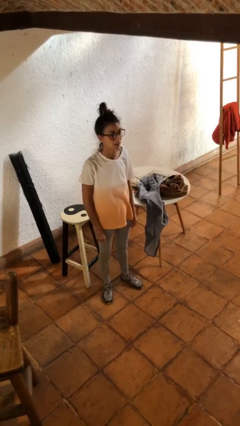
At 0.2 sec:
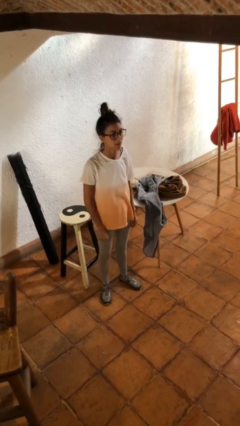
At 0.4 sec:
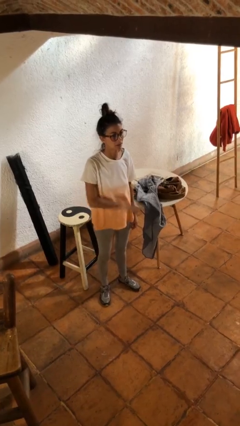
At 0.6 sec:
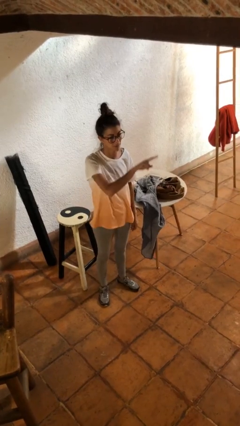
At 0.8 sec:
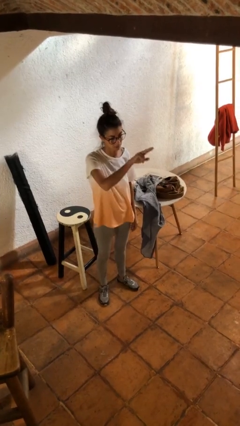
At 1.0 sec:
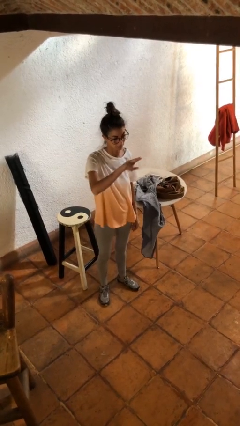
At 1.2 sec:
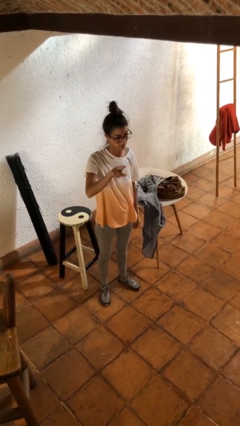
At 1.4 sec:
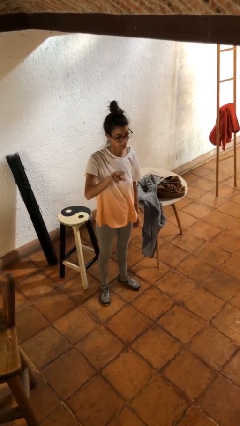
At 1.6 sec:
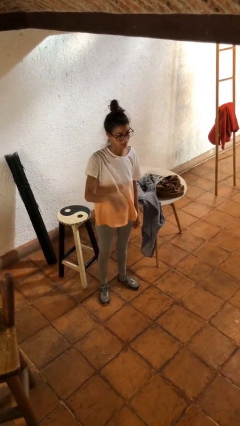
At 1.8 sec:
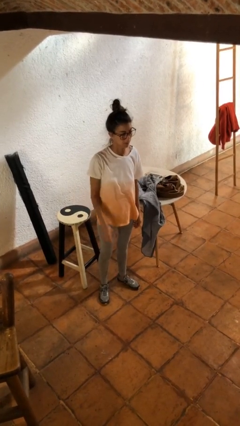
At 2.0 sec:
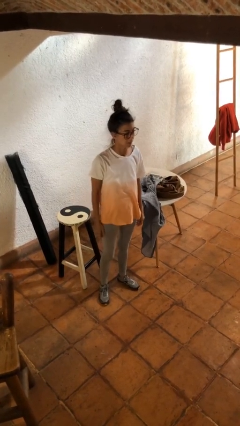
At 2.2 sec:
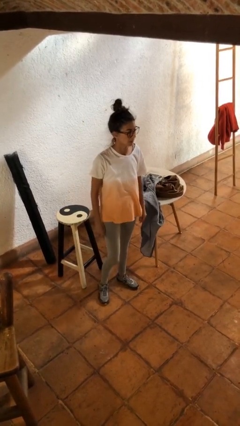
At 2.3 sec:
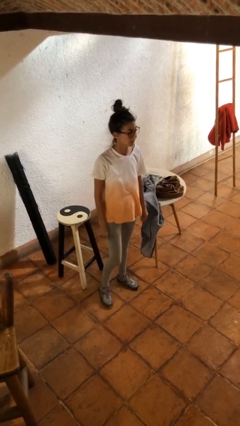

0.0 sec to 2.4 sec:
person gestures swipe right

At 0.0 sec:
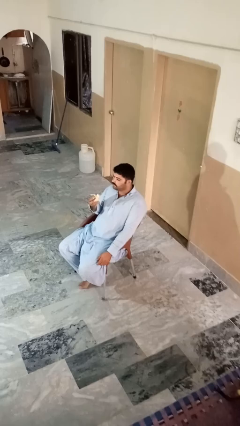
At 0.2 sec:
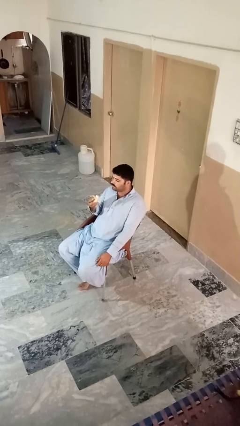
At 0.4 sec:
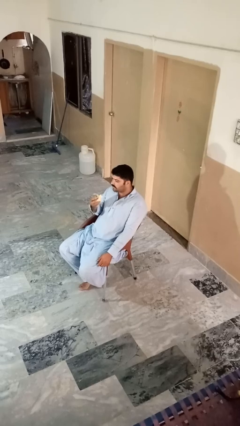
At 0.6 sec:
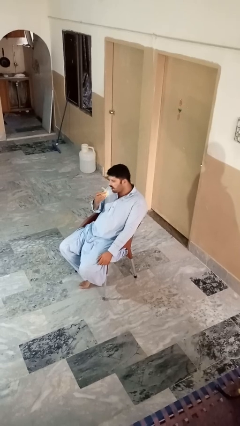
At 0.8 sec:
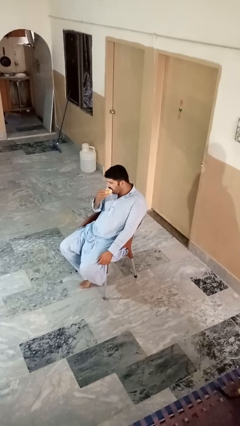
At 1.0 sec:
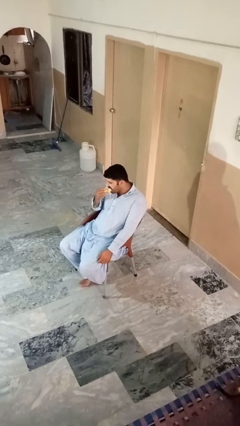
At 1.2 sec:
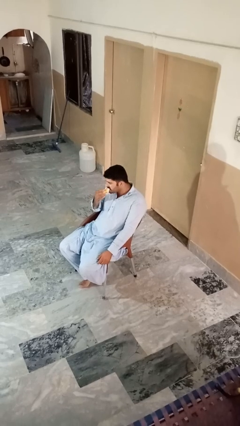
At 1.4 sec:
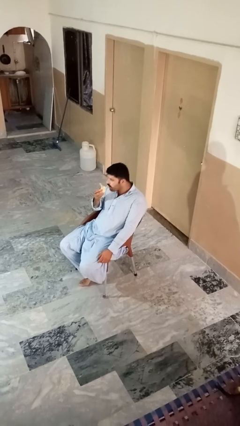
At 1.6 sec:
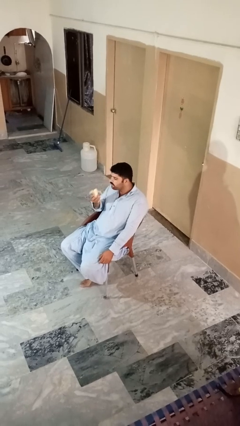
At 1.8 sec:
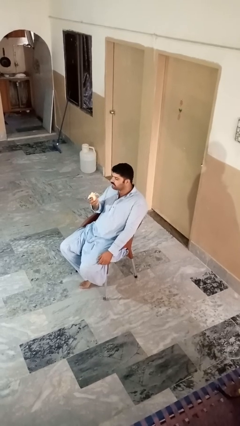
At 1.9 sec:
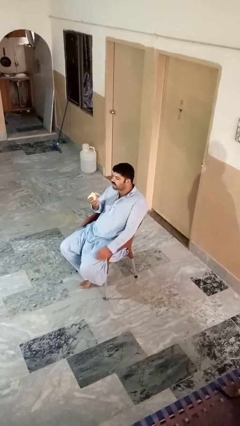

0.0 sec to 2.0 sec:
person eats banana

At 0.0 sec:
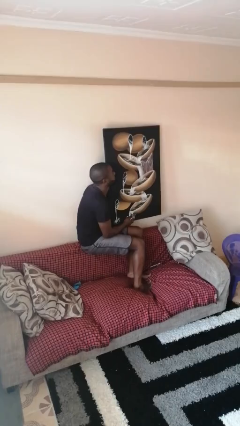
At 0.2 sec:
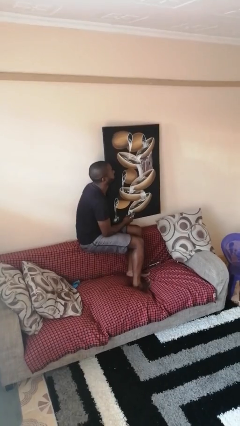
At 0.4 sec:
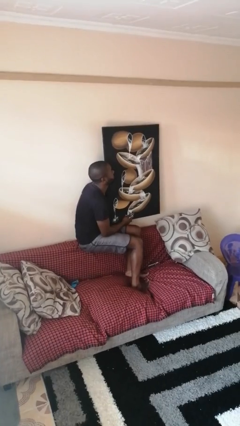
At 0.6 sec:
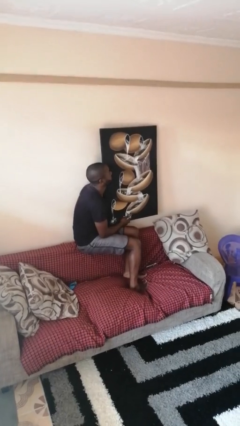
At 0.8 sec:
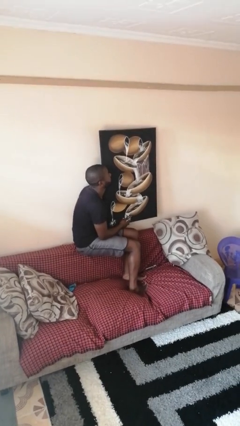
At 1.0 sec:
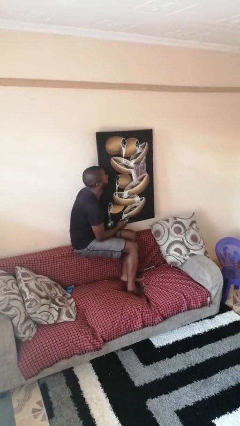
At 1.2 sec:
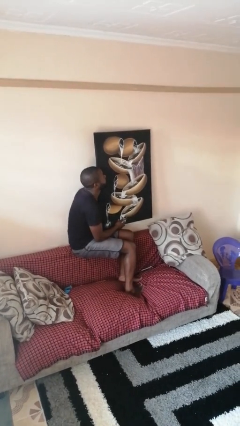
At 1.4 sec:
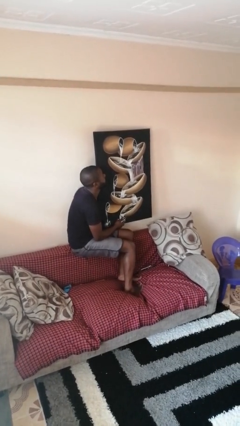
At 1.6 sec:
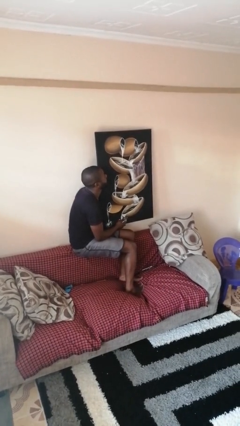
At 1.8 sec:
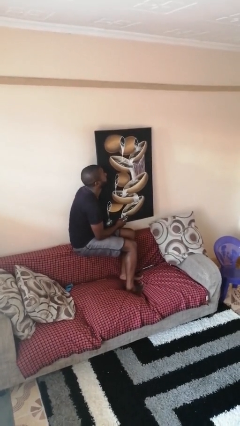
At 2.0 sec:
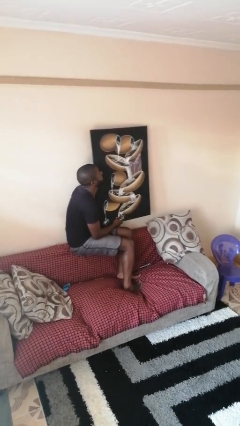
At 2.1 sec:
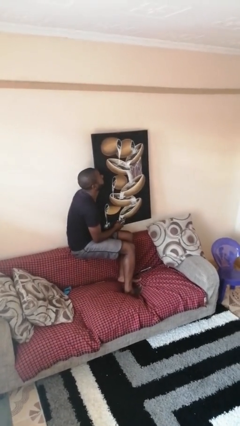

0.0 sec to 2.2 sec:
person puts up picture frame

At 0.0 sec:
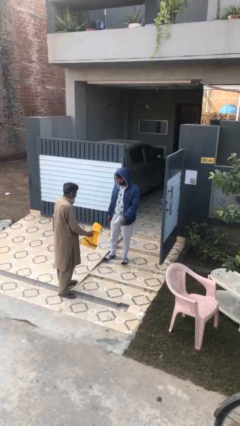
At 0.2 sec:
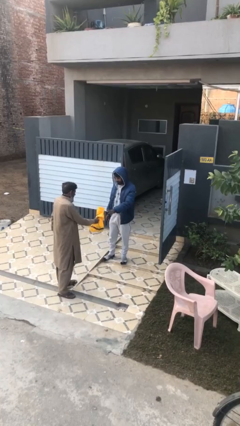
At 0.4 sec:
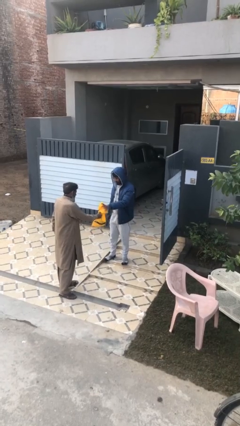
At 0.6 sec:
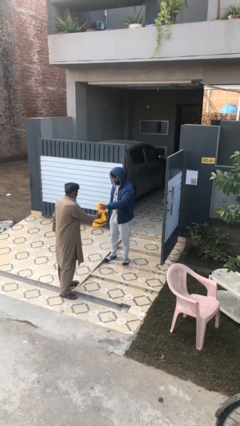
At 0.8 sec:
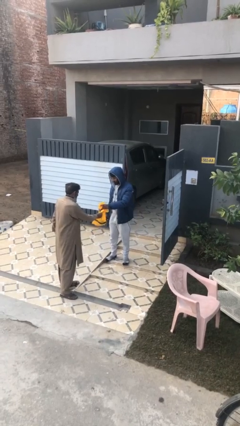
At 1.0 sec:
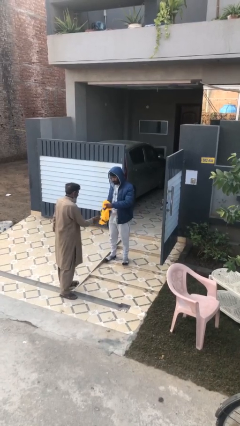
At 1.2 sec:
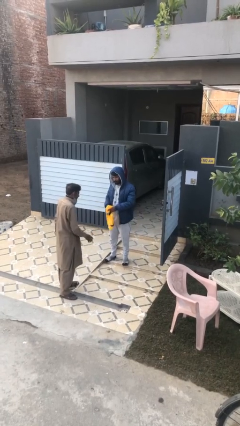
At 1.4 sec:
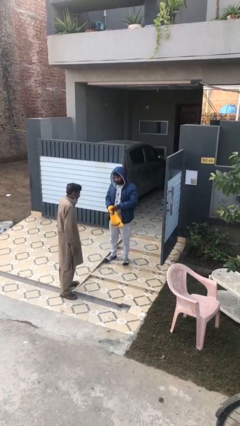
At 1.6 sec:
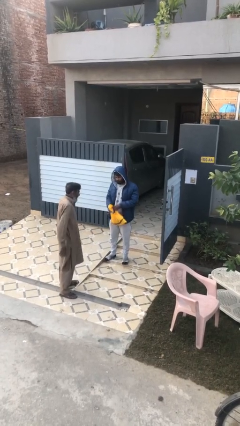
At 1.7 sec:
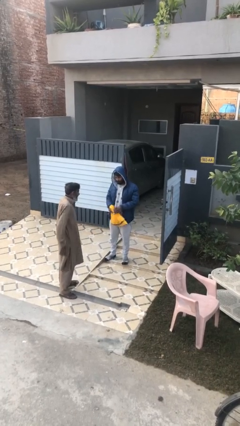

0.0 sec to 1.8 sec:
person transfers object to person

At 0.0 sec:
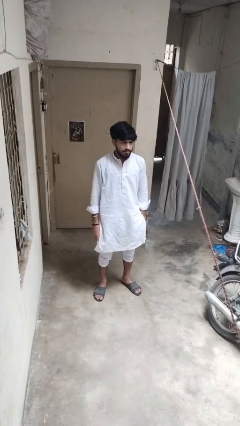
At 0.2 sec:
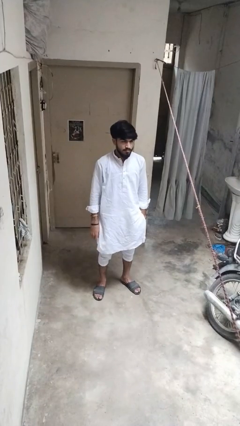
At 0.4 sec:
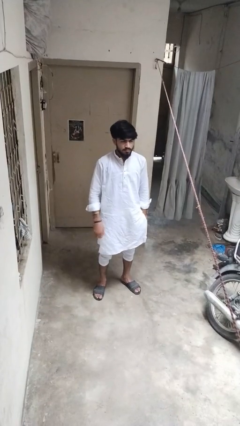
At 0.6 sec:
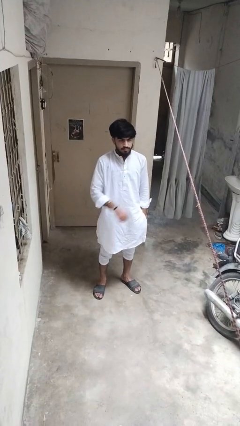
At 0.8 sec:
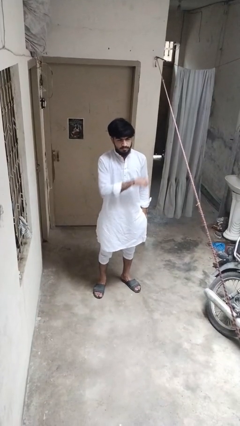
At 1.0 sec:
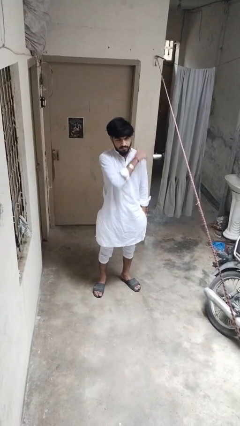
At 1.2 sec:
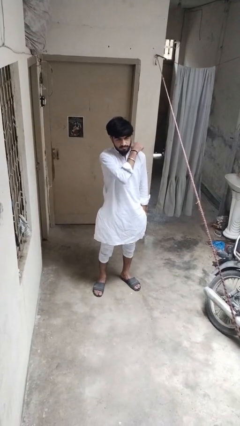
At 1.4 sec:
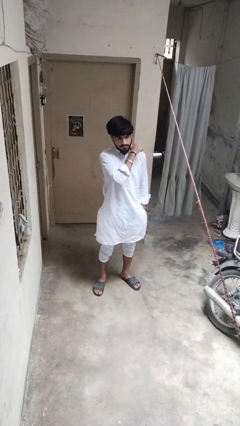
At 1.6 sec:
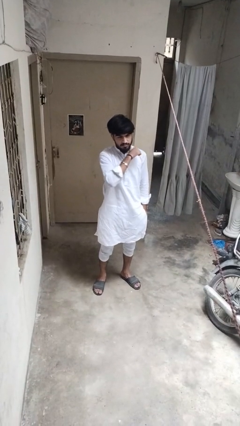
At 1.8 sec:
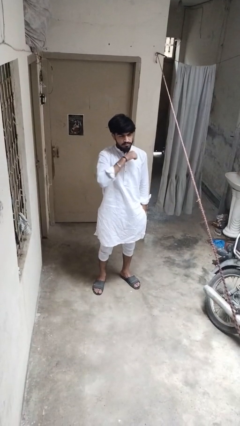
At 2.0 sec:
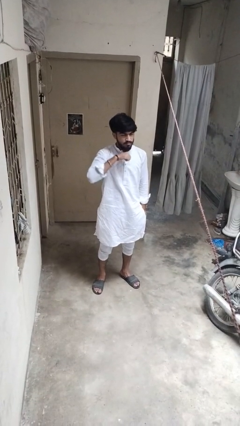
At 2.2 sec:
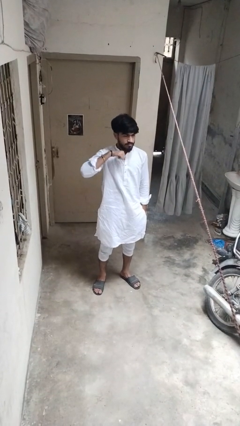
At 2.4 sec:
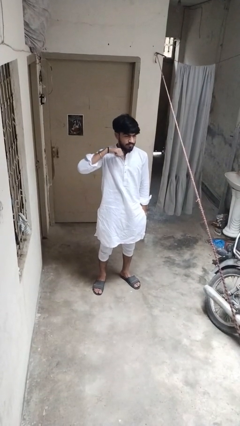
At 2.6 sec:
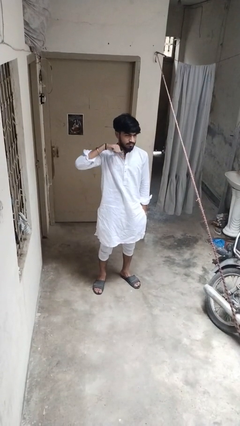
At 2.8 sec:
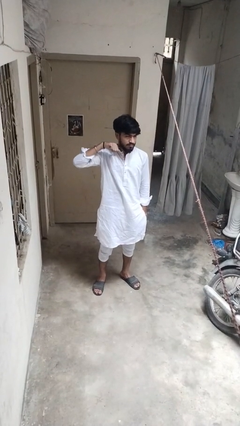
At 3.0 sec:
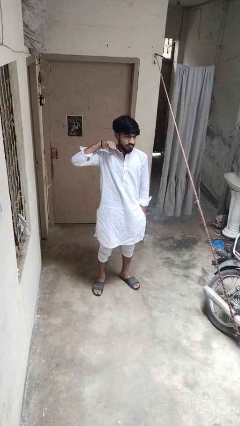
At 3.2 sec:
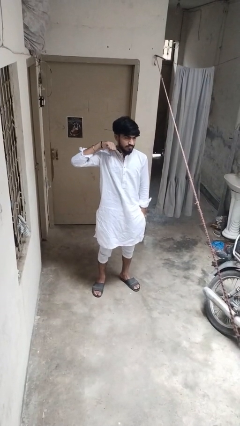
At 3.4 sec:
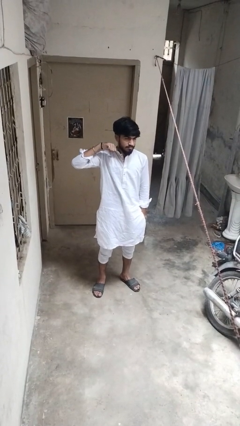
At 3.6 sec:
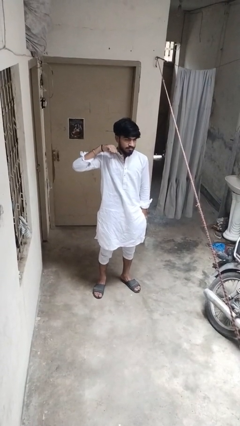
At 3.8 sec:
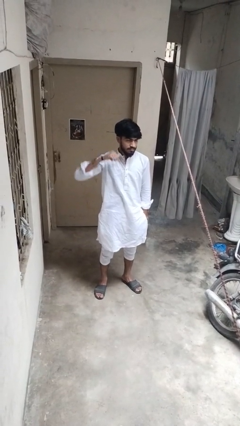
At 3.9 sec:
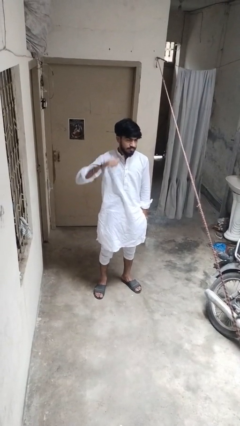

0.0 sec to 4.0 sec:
person gestures cut

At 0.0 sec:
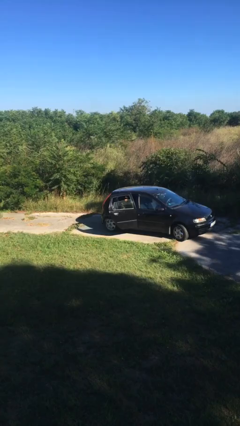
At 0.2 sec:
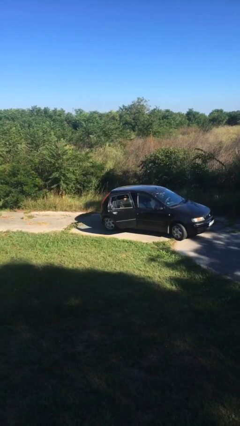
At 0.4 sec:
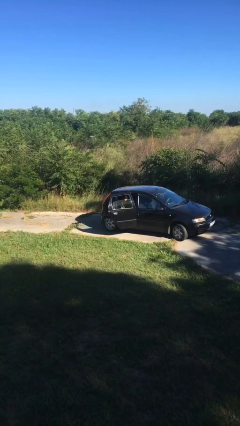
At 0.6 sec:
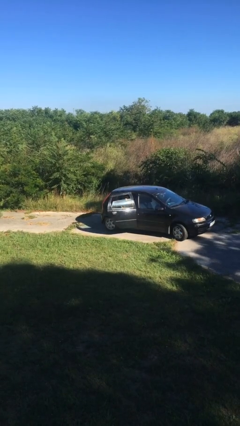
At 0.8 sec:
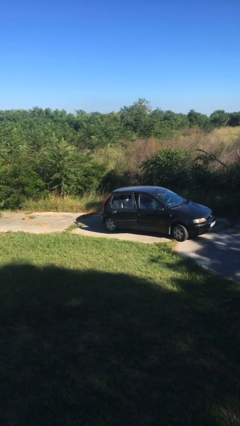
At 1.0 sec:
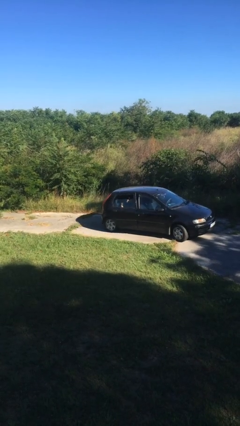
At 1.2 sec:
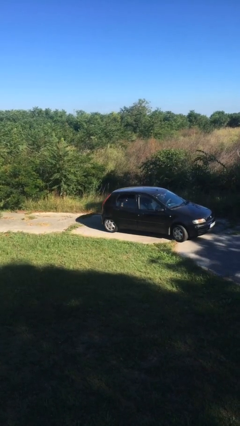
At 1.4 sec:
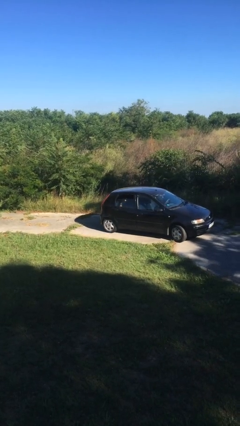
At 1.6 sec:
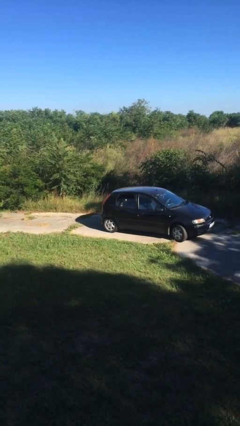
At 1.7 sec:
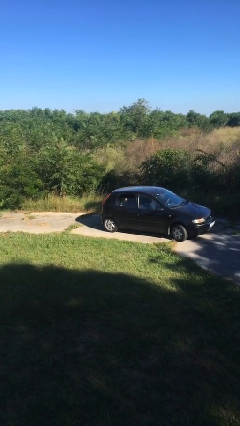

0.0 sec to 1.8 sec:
person closes car door

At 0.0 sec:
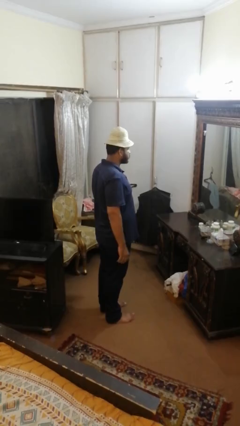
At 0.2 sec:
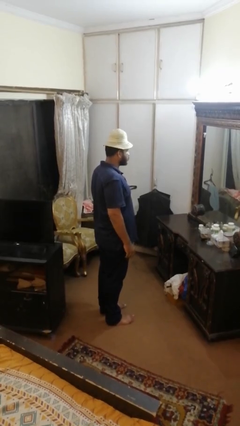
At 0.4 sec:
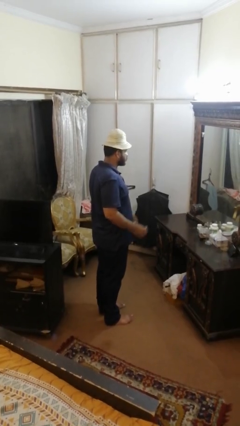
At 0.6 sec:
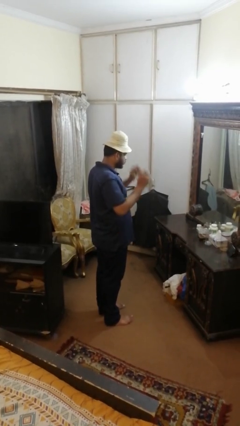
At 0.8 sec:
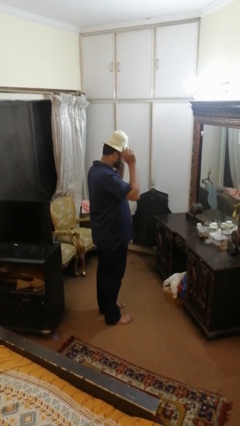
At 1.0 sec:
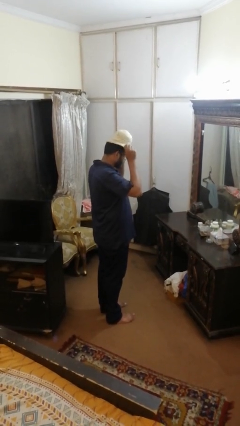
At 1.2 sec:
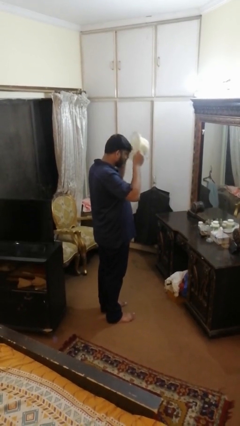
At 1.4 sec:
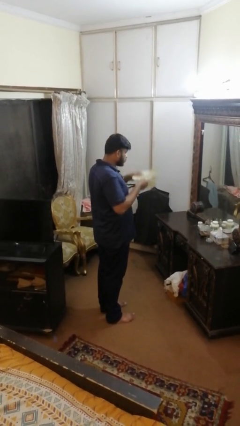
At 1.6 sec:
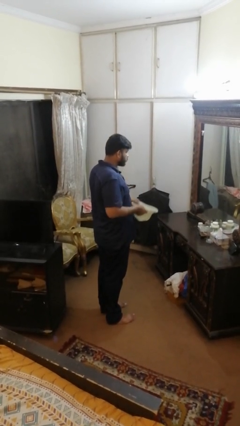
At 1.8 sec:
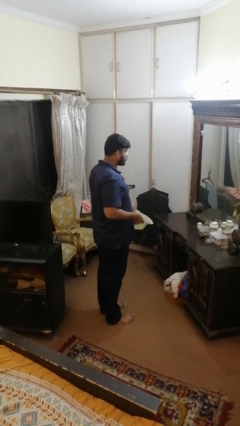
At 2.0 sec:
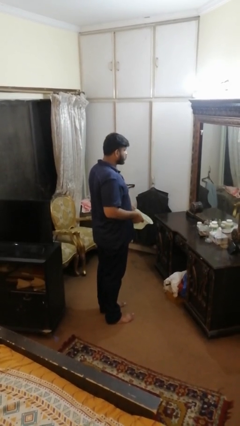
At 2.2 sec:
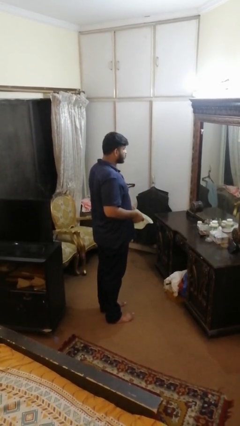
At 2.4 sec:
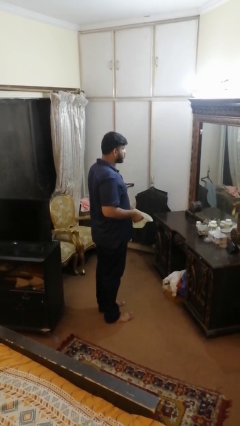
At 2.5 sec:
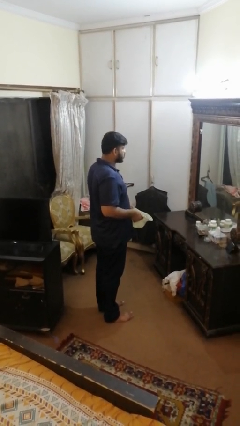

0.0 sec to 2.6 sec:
person takes off hat
